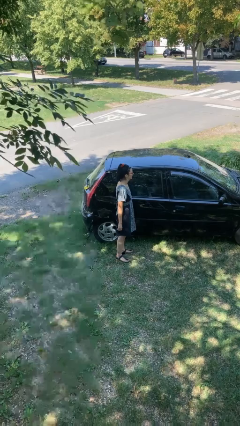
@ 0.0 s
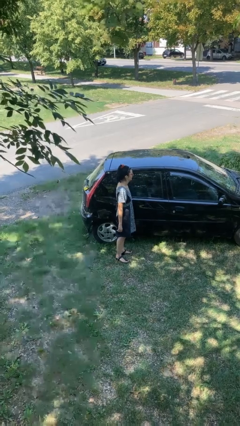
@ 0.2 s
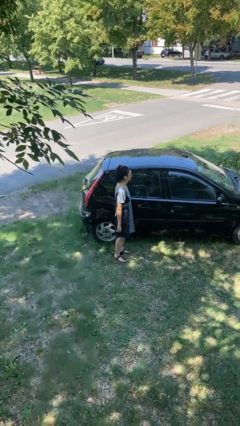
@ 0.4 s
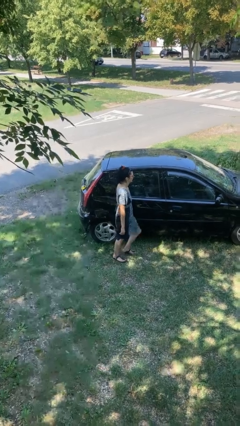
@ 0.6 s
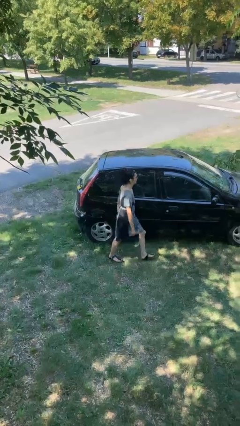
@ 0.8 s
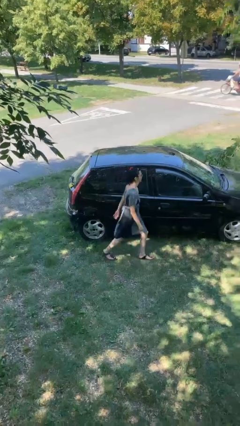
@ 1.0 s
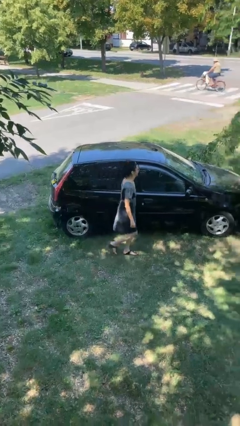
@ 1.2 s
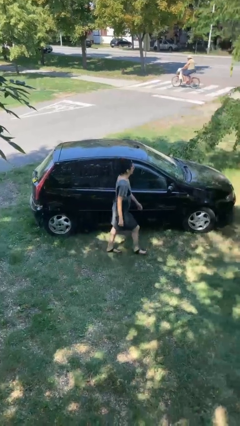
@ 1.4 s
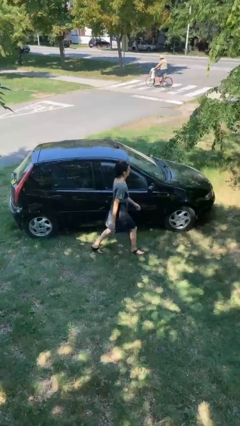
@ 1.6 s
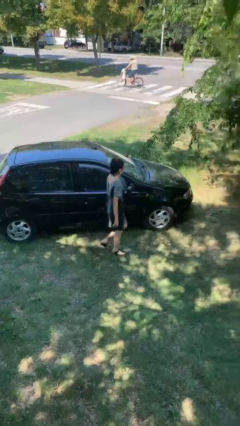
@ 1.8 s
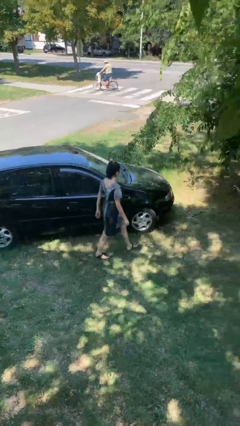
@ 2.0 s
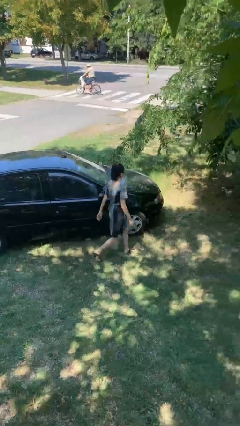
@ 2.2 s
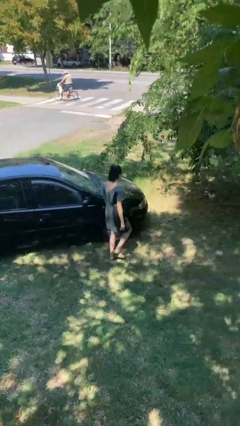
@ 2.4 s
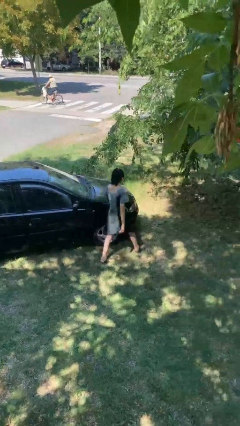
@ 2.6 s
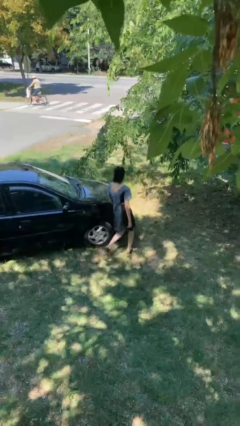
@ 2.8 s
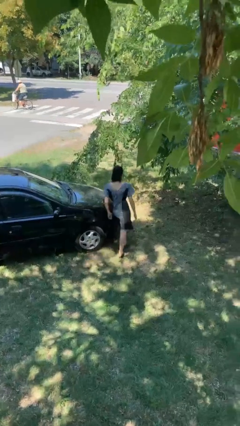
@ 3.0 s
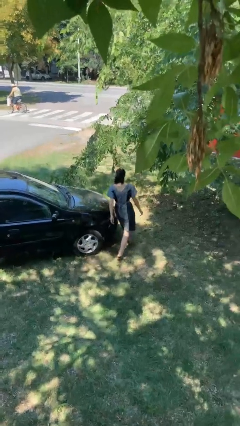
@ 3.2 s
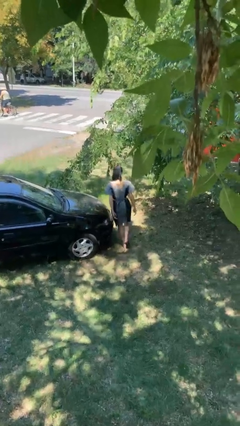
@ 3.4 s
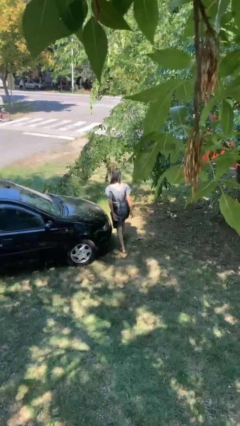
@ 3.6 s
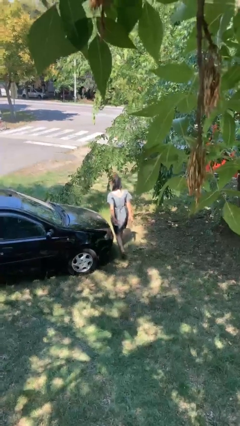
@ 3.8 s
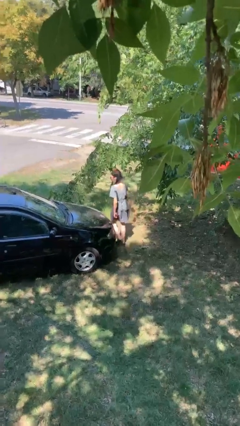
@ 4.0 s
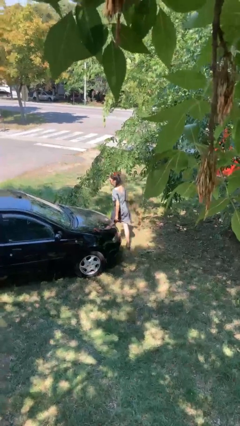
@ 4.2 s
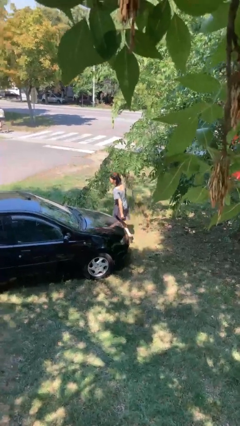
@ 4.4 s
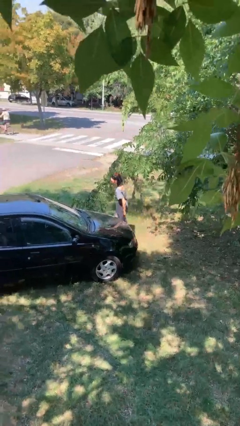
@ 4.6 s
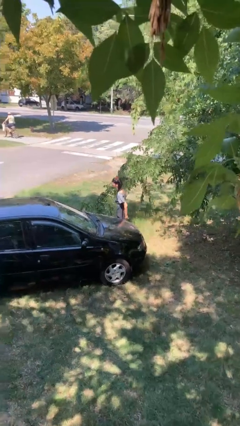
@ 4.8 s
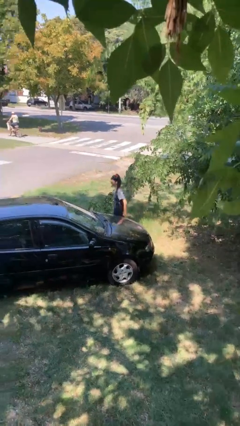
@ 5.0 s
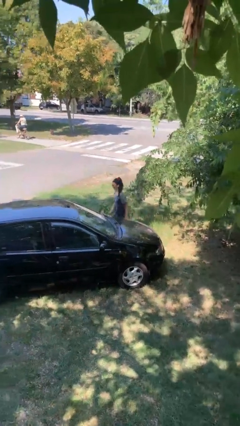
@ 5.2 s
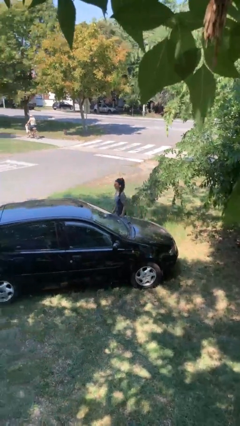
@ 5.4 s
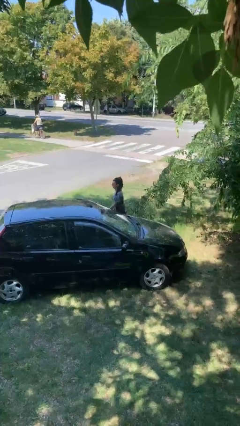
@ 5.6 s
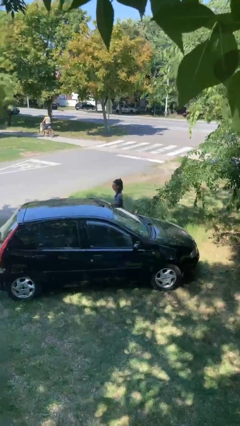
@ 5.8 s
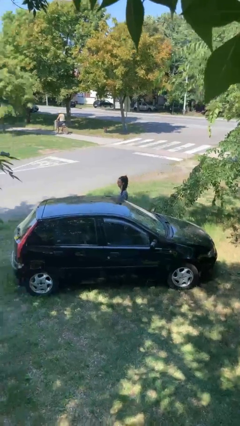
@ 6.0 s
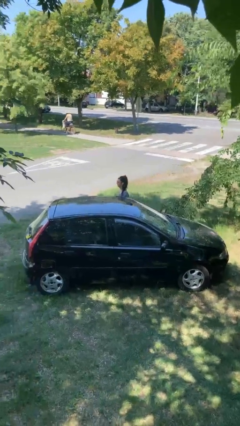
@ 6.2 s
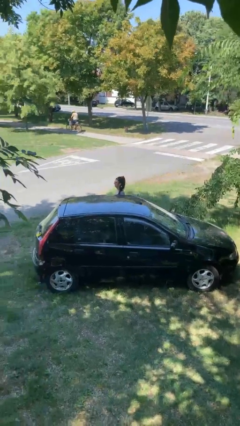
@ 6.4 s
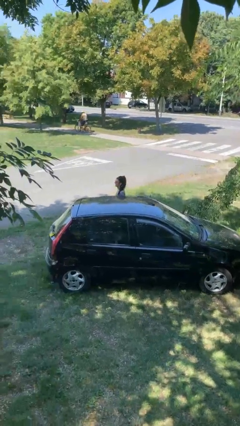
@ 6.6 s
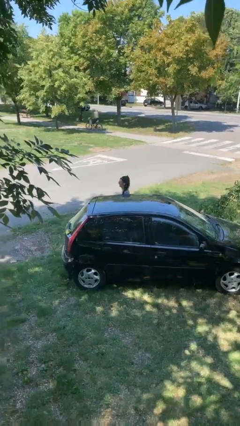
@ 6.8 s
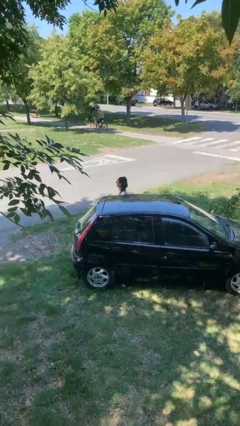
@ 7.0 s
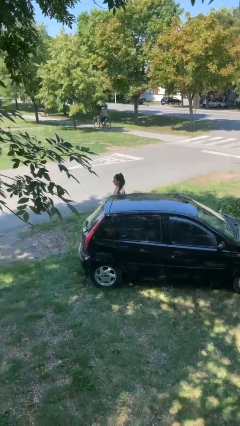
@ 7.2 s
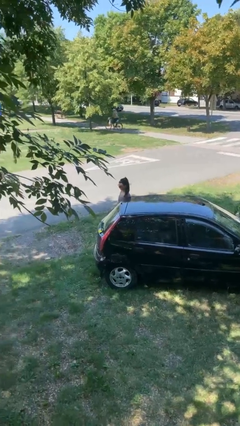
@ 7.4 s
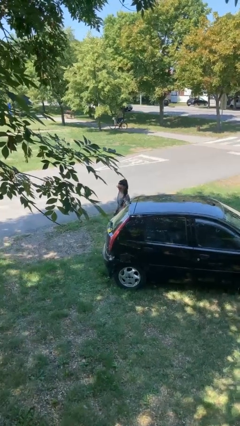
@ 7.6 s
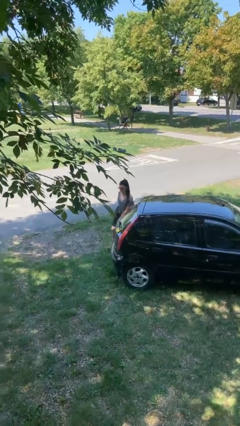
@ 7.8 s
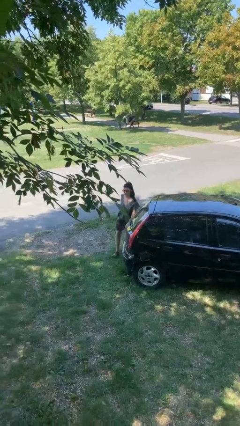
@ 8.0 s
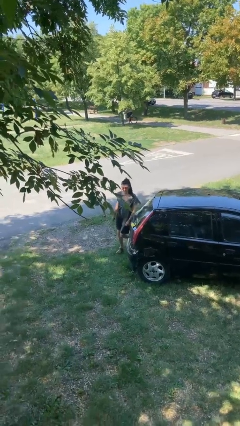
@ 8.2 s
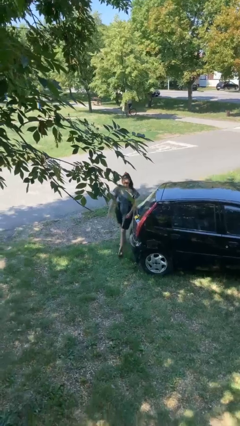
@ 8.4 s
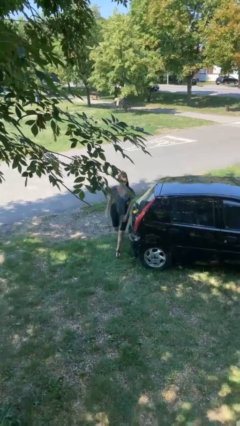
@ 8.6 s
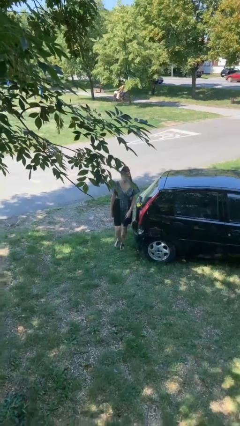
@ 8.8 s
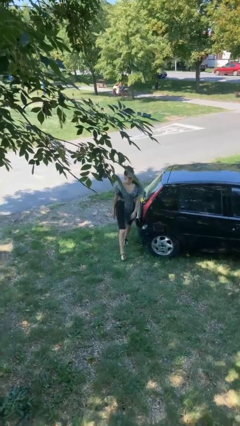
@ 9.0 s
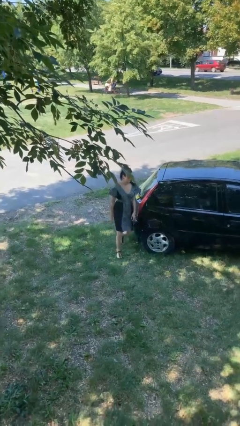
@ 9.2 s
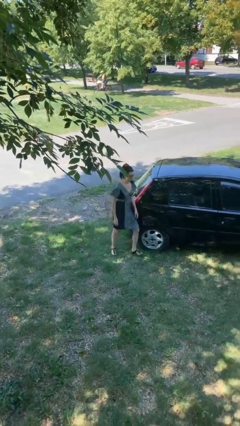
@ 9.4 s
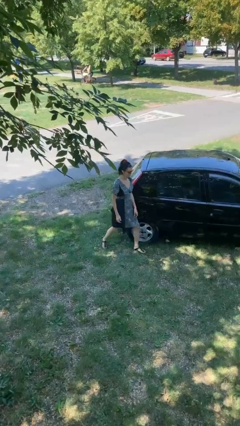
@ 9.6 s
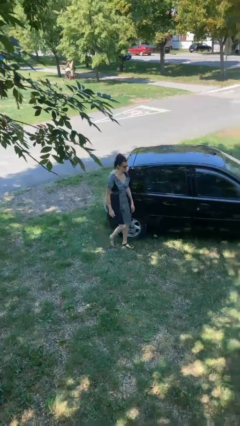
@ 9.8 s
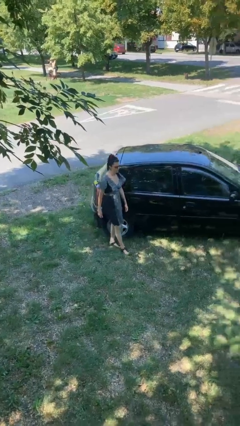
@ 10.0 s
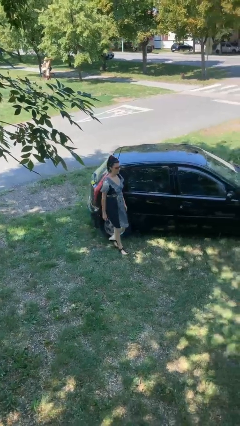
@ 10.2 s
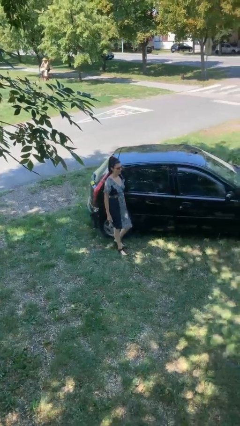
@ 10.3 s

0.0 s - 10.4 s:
person walks around car

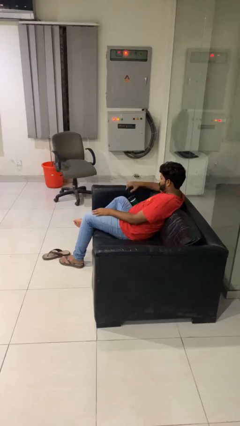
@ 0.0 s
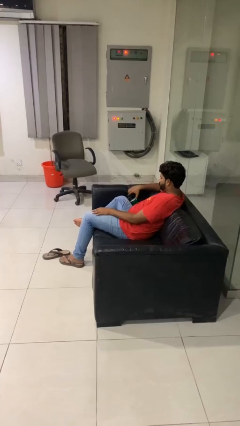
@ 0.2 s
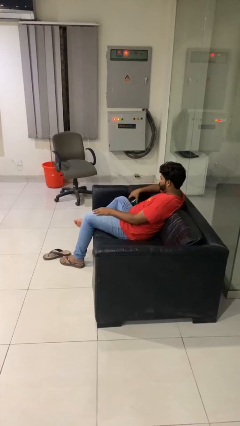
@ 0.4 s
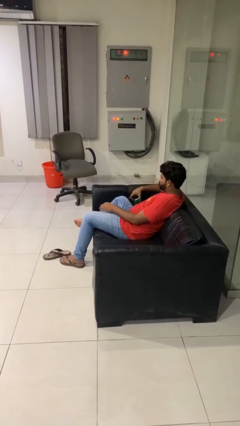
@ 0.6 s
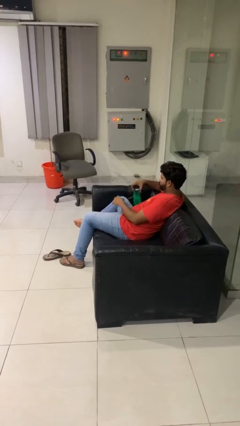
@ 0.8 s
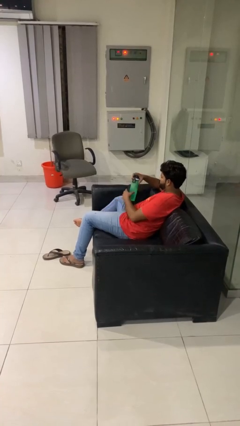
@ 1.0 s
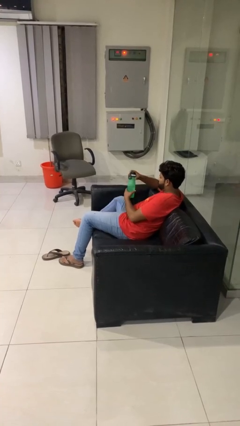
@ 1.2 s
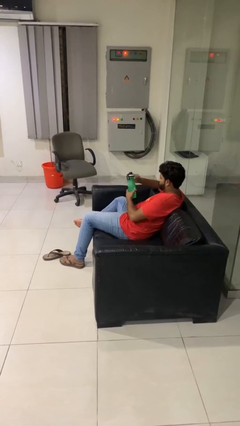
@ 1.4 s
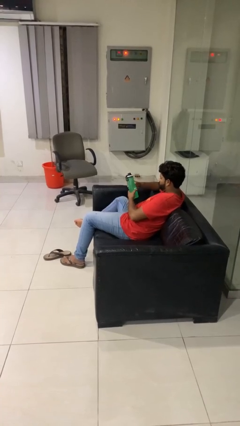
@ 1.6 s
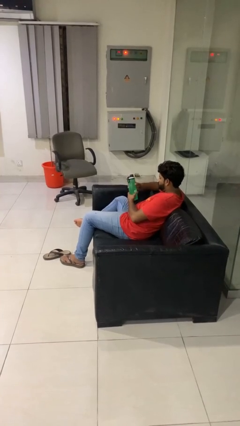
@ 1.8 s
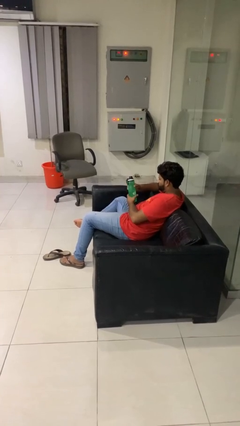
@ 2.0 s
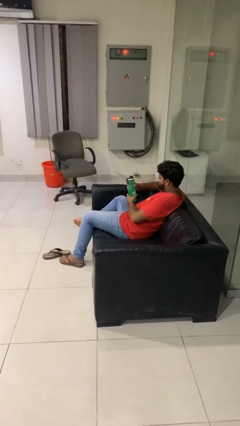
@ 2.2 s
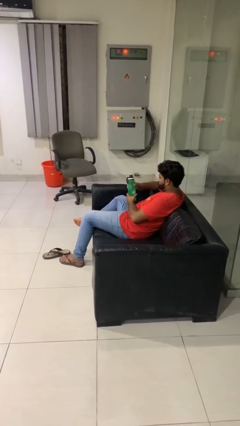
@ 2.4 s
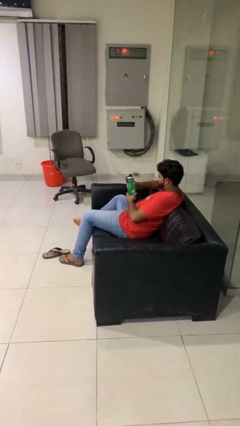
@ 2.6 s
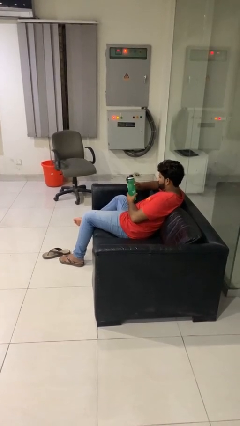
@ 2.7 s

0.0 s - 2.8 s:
person picks up object from couch

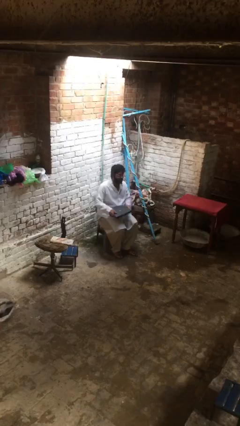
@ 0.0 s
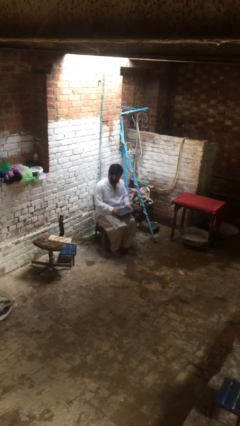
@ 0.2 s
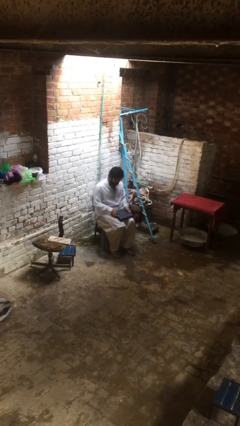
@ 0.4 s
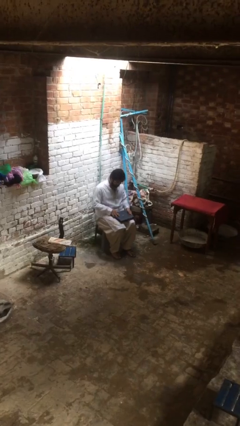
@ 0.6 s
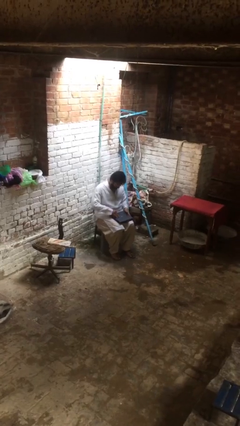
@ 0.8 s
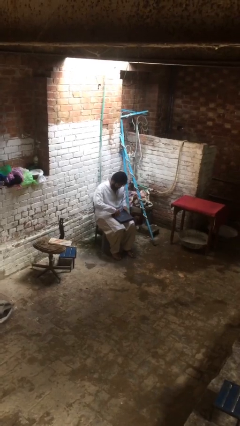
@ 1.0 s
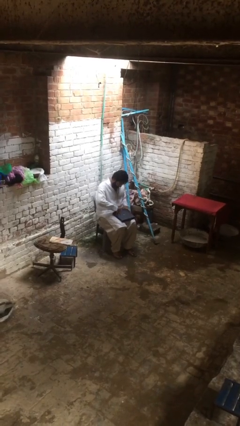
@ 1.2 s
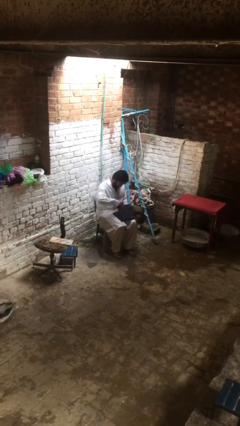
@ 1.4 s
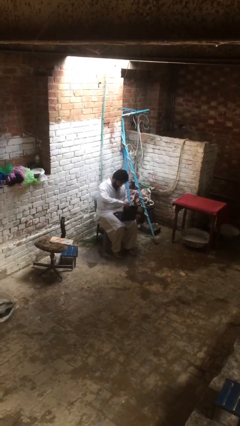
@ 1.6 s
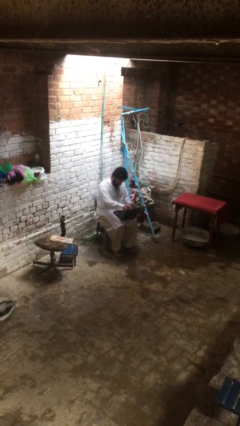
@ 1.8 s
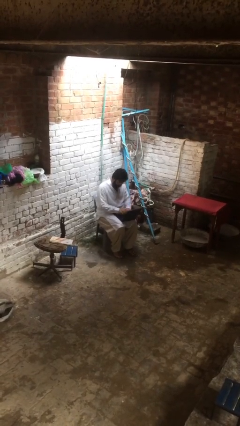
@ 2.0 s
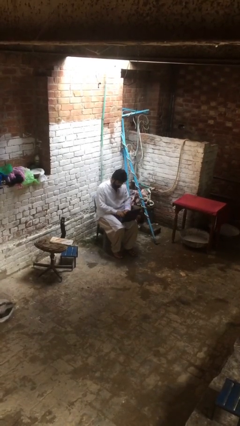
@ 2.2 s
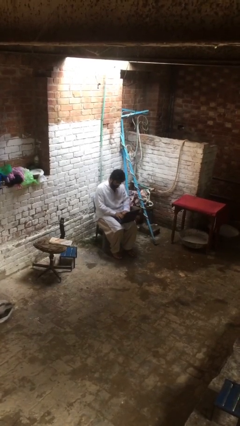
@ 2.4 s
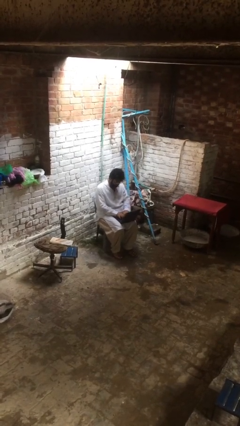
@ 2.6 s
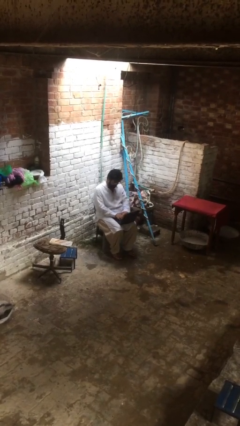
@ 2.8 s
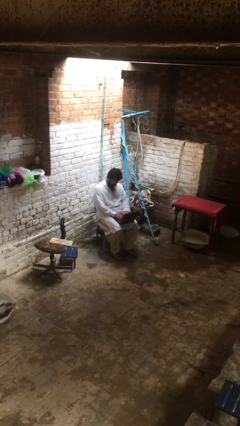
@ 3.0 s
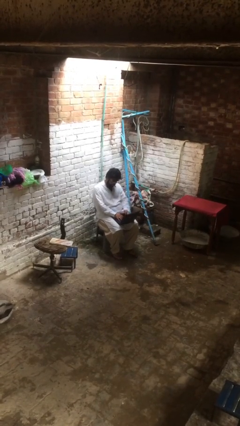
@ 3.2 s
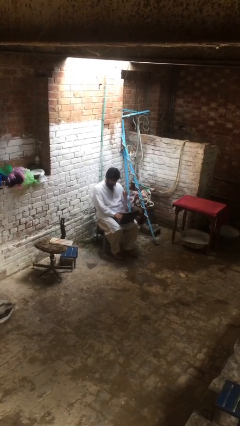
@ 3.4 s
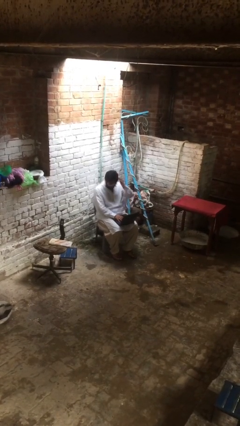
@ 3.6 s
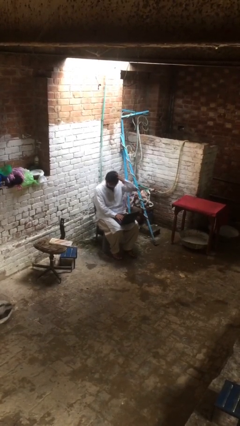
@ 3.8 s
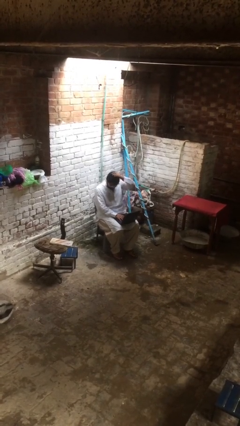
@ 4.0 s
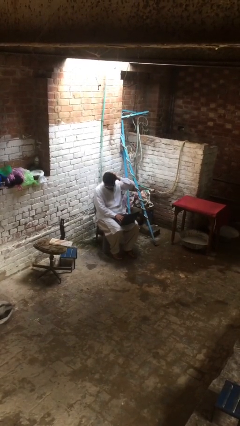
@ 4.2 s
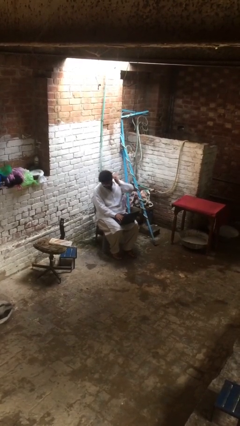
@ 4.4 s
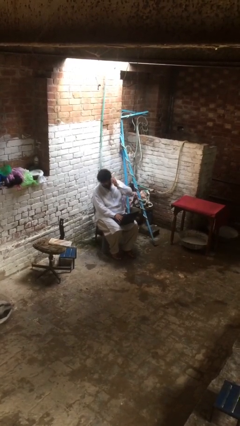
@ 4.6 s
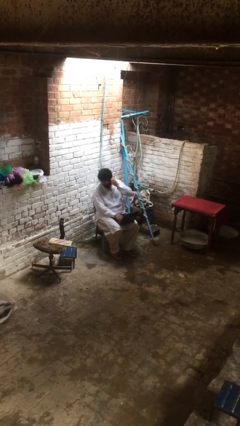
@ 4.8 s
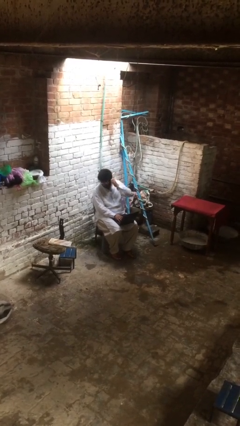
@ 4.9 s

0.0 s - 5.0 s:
person interacts with laptop
